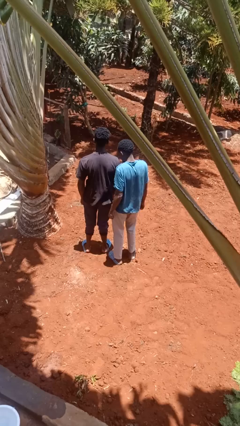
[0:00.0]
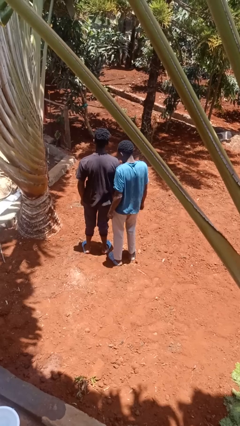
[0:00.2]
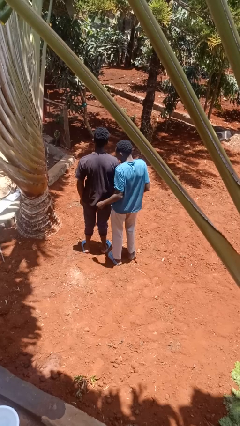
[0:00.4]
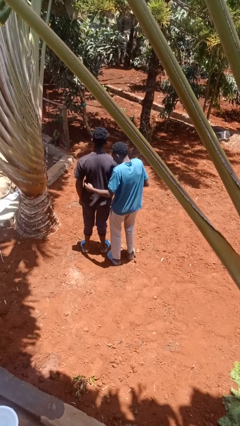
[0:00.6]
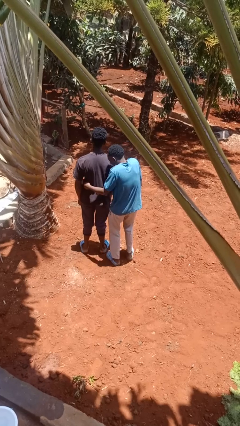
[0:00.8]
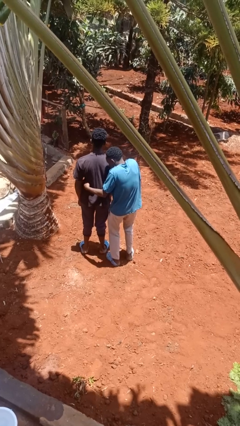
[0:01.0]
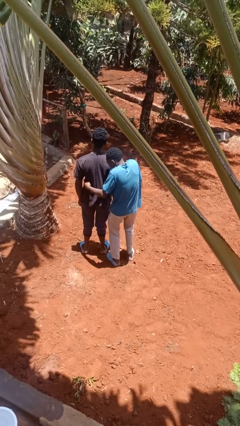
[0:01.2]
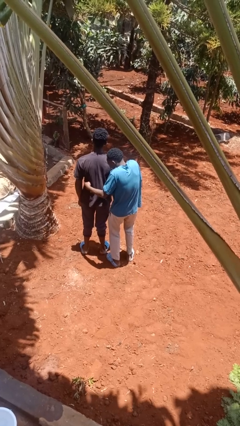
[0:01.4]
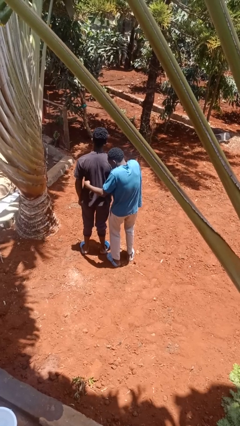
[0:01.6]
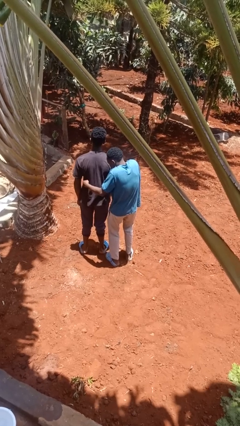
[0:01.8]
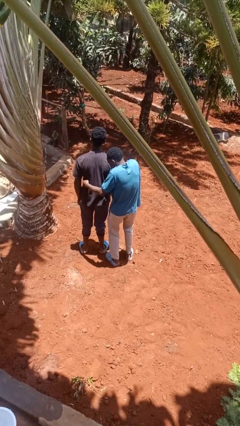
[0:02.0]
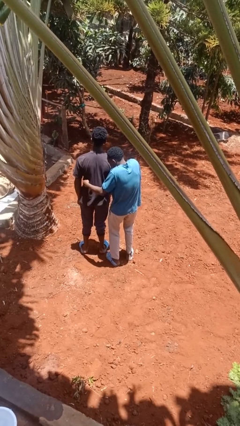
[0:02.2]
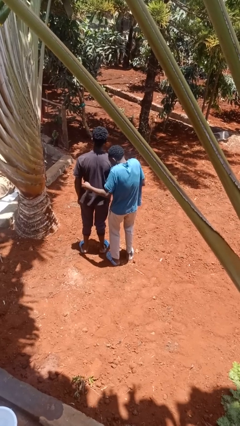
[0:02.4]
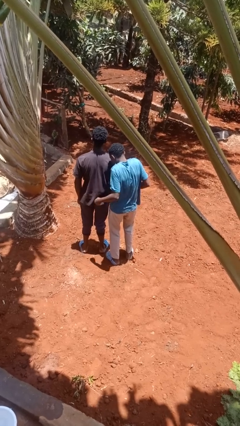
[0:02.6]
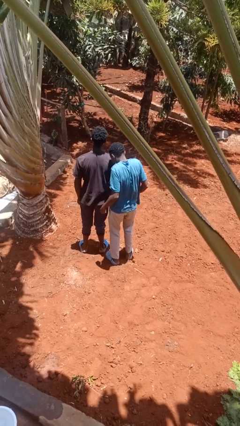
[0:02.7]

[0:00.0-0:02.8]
person tickles person

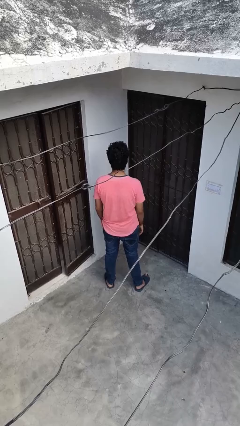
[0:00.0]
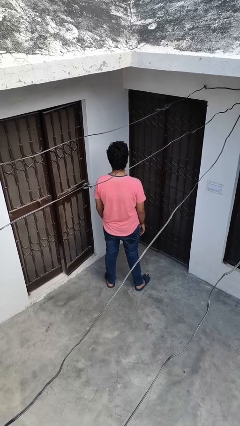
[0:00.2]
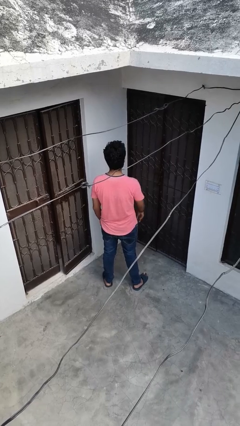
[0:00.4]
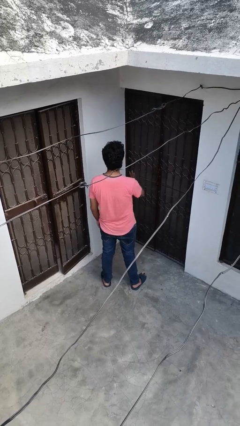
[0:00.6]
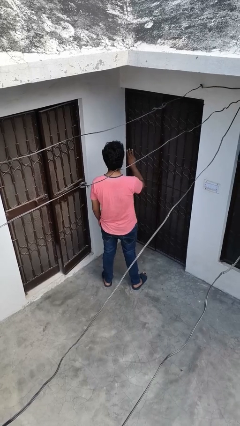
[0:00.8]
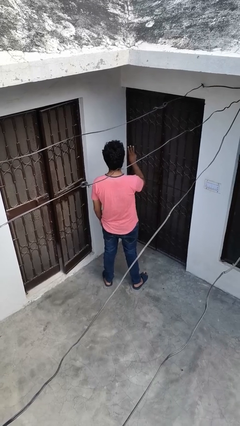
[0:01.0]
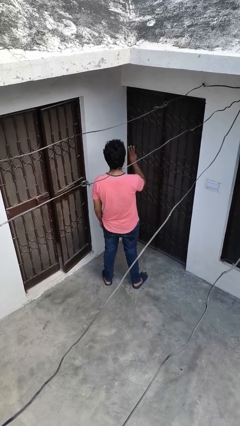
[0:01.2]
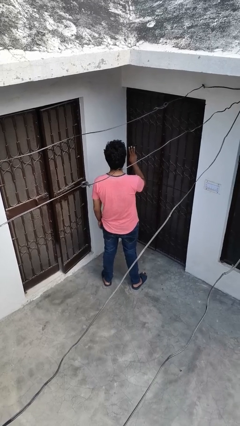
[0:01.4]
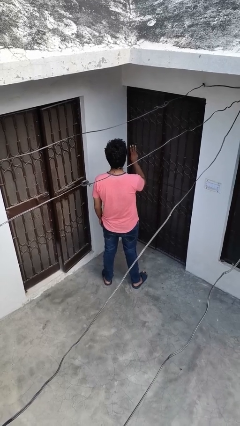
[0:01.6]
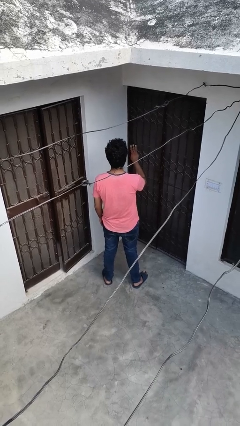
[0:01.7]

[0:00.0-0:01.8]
person gestures number three

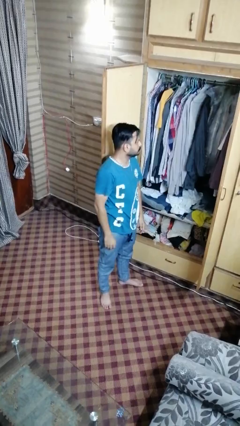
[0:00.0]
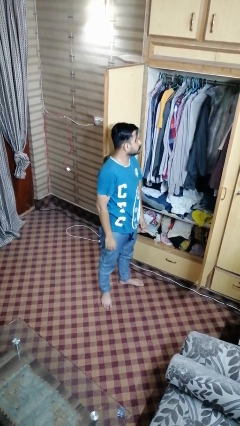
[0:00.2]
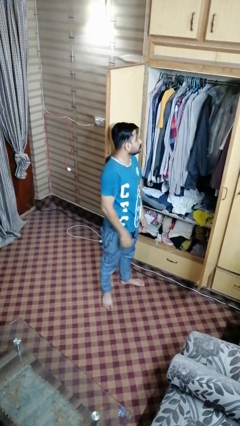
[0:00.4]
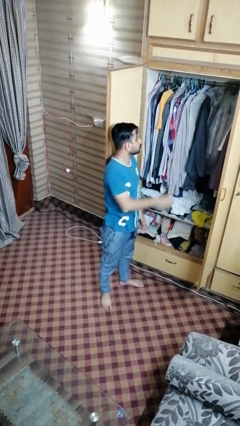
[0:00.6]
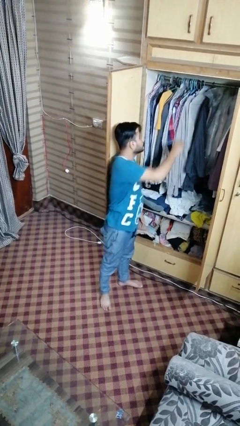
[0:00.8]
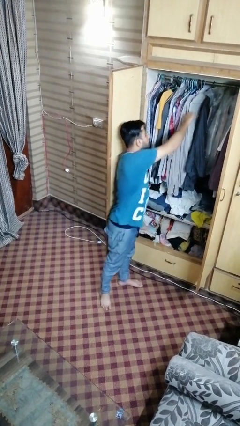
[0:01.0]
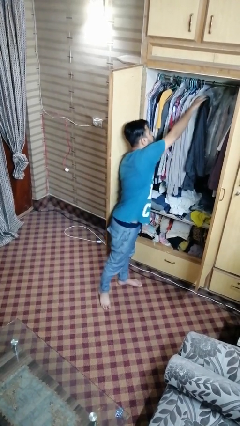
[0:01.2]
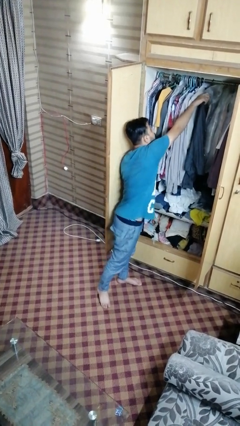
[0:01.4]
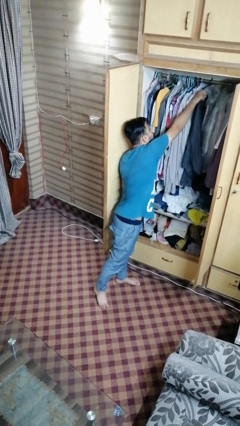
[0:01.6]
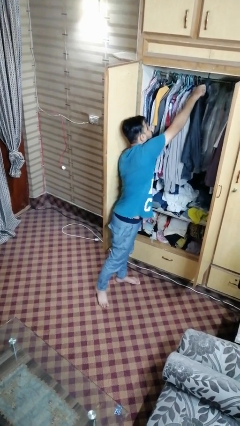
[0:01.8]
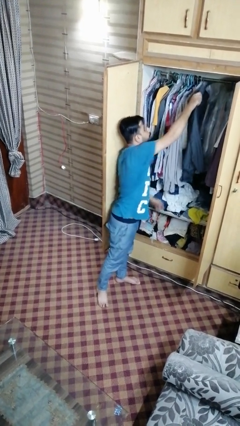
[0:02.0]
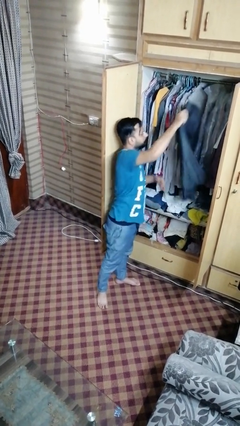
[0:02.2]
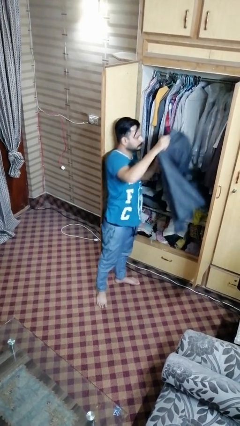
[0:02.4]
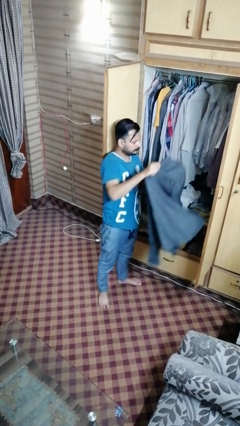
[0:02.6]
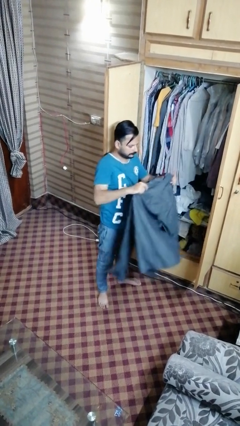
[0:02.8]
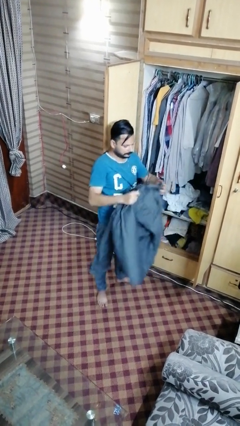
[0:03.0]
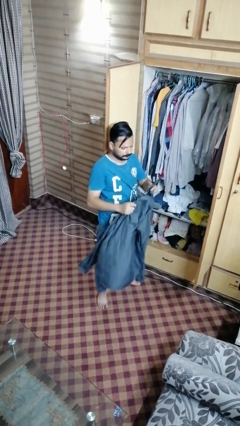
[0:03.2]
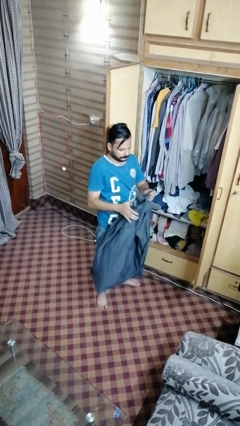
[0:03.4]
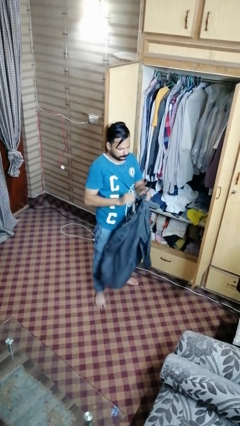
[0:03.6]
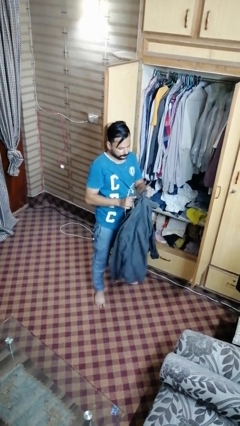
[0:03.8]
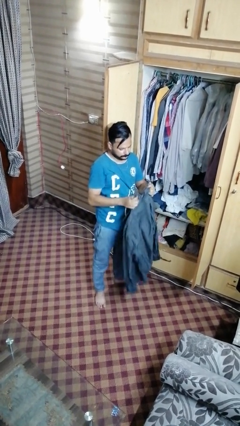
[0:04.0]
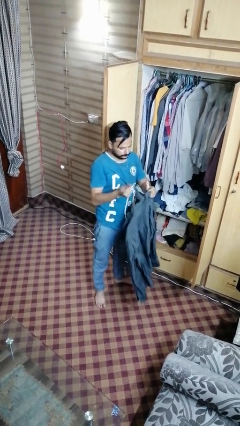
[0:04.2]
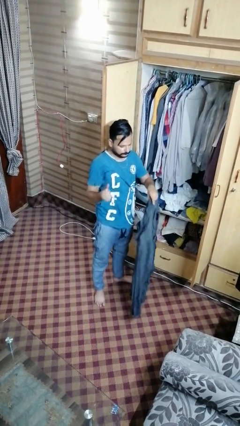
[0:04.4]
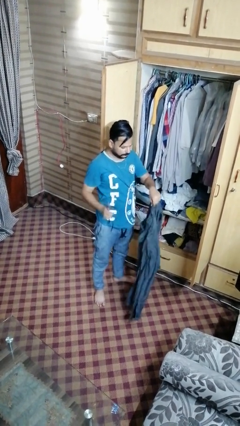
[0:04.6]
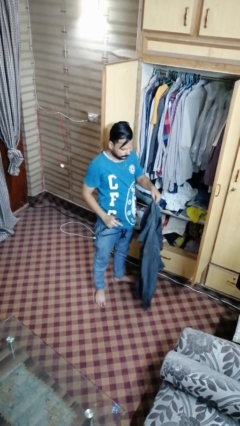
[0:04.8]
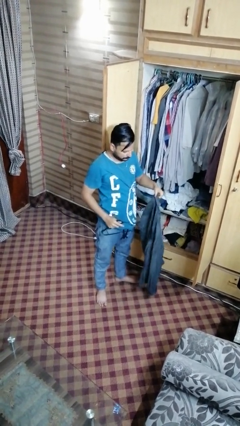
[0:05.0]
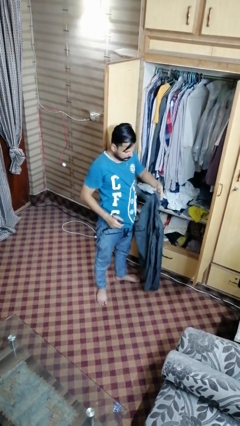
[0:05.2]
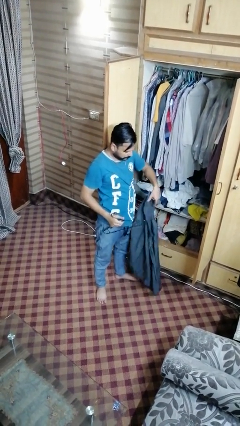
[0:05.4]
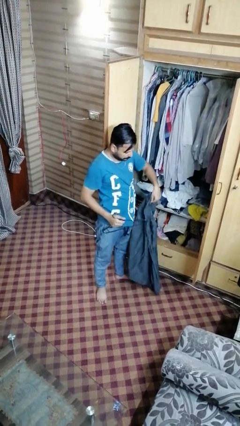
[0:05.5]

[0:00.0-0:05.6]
person takes clothes from dresser

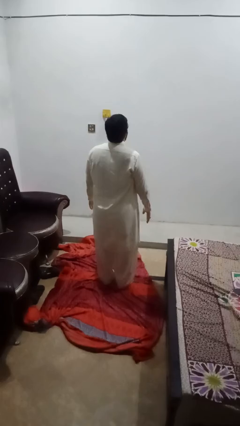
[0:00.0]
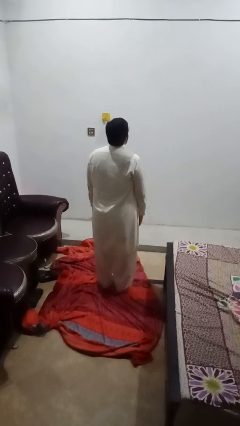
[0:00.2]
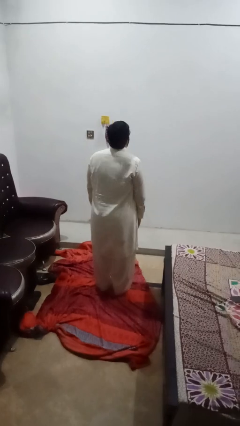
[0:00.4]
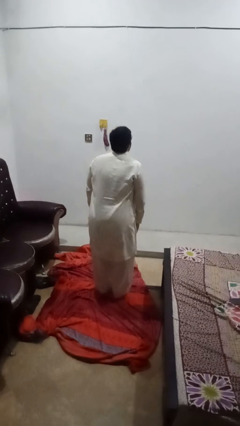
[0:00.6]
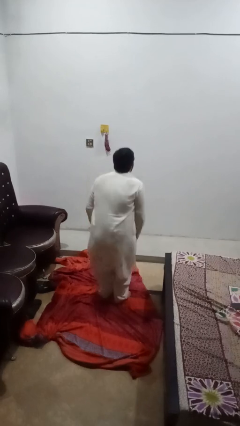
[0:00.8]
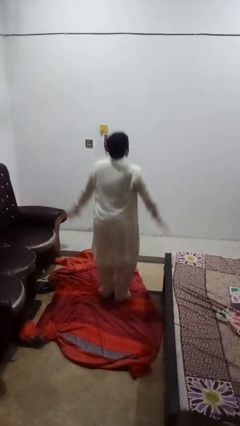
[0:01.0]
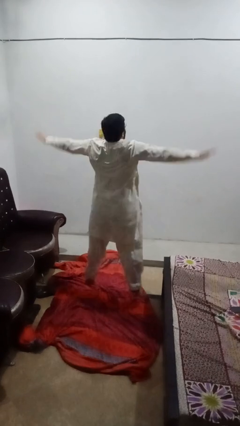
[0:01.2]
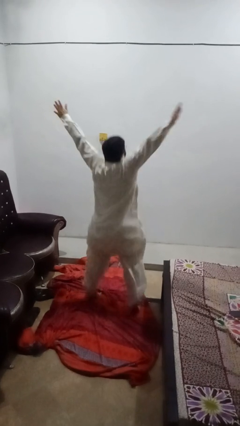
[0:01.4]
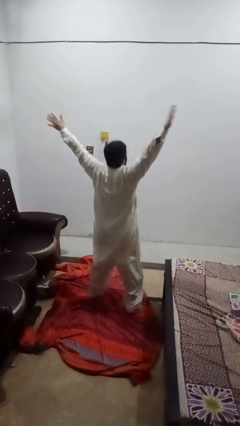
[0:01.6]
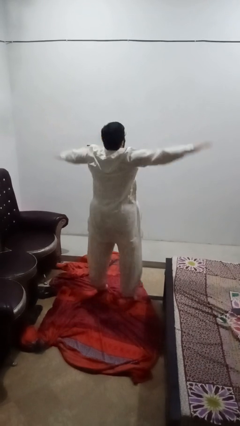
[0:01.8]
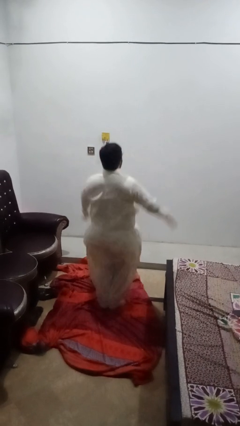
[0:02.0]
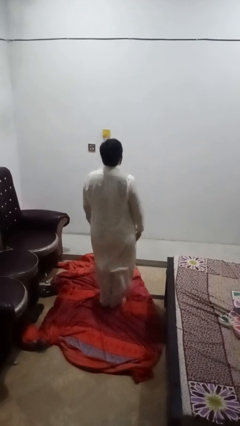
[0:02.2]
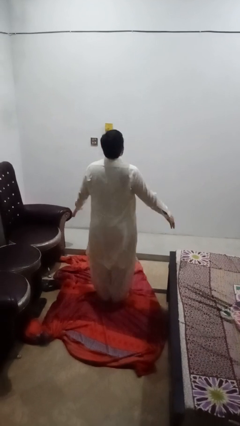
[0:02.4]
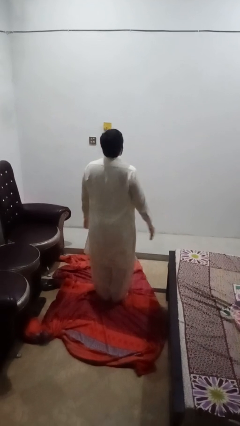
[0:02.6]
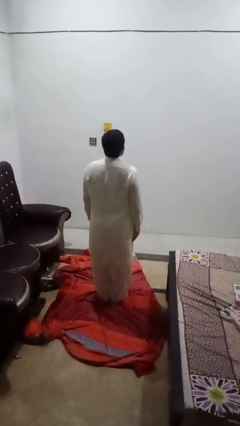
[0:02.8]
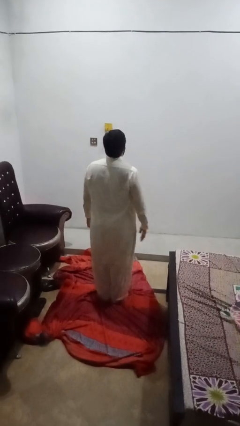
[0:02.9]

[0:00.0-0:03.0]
person exercises with jumping jacks

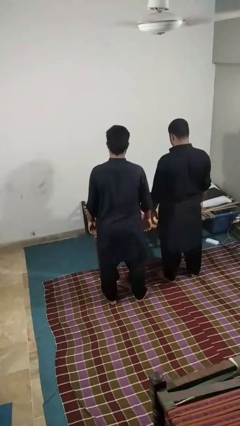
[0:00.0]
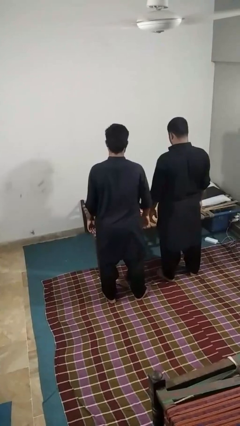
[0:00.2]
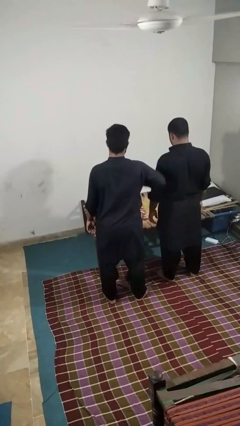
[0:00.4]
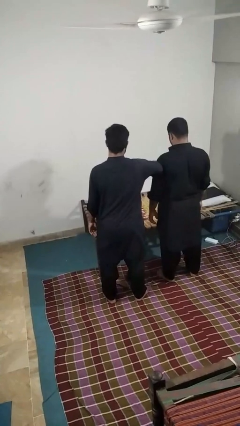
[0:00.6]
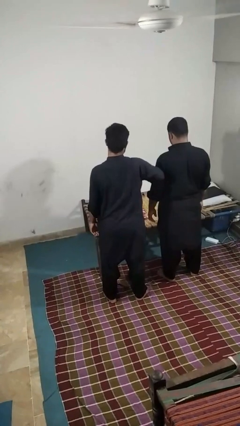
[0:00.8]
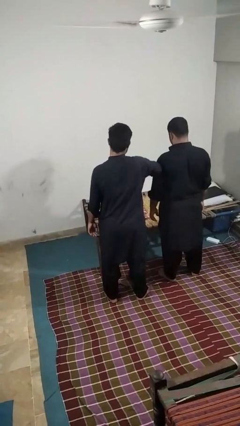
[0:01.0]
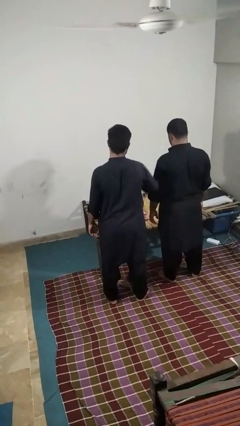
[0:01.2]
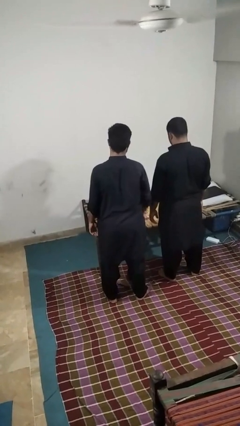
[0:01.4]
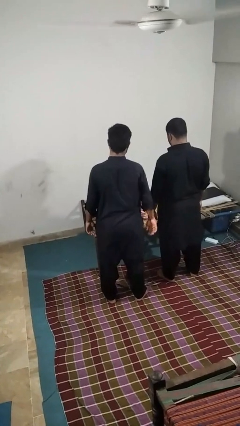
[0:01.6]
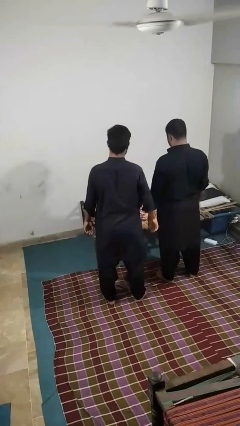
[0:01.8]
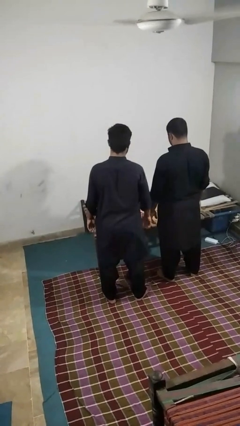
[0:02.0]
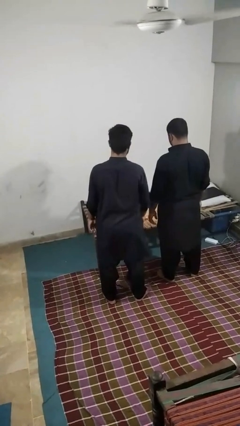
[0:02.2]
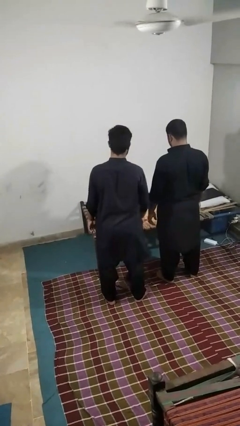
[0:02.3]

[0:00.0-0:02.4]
person nudges person with elbow

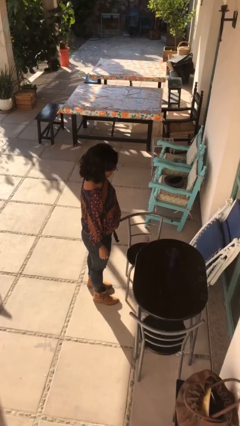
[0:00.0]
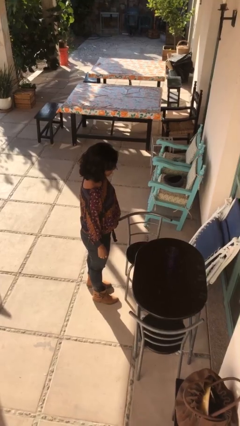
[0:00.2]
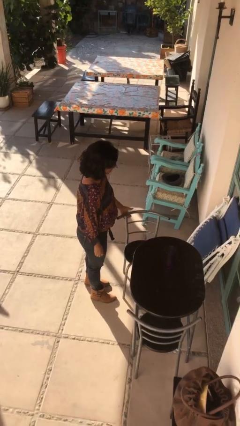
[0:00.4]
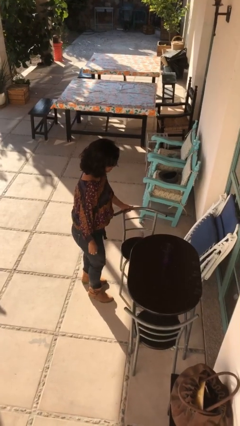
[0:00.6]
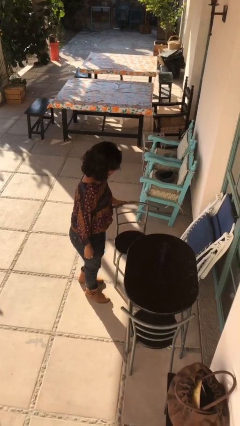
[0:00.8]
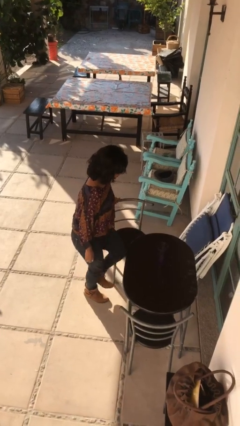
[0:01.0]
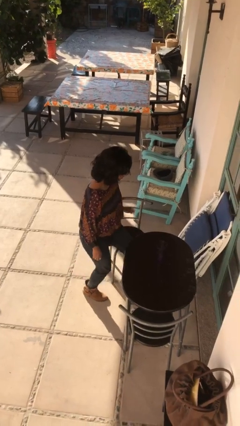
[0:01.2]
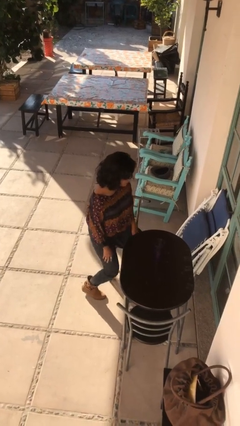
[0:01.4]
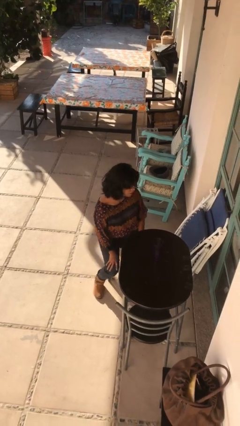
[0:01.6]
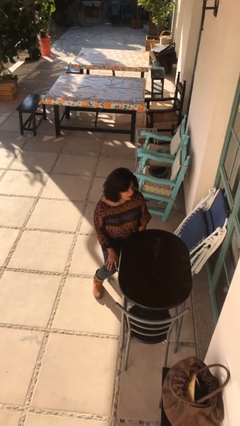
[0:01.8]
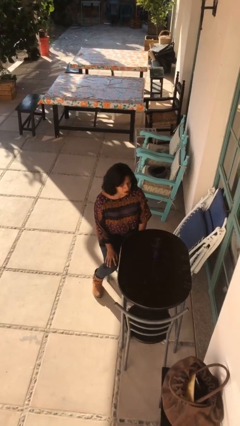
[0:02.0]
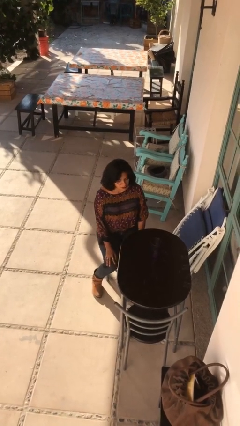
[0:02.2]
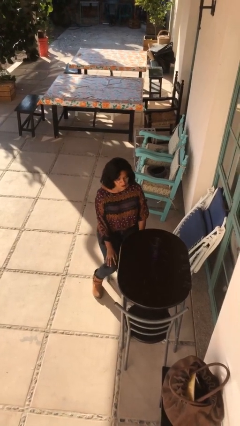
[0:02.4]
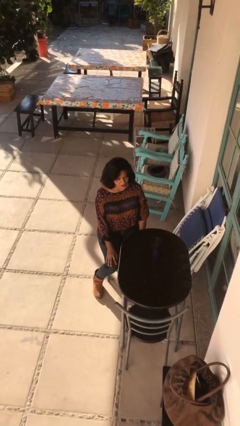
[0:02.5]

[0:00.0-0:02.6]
person sits down
